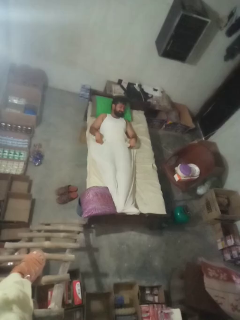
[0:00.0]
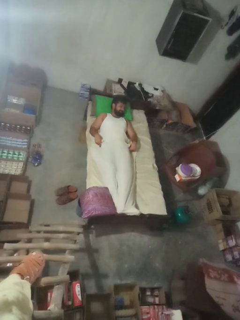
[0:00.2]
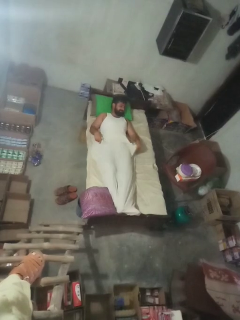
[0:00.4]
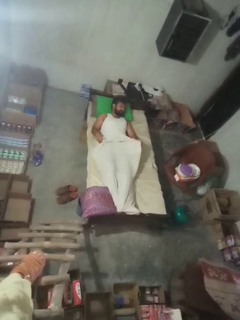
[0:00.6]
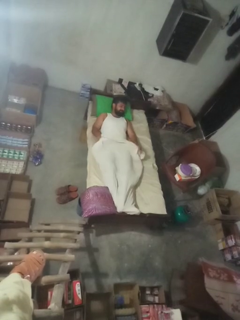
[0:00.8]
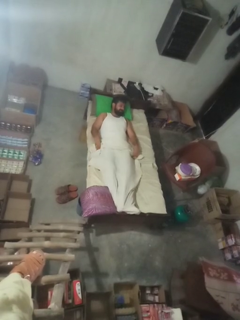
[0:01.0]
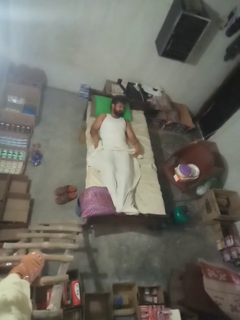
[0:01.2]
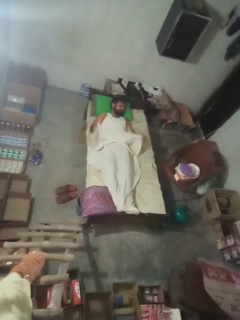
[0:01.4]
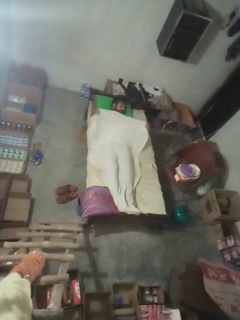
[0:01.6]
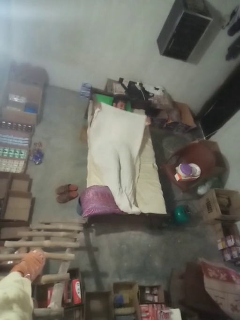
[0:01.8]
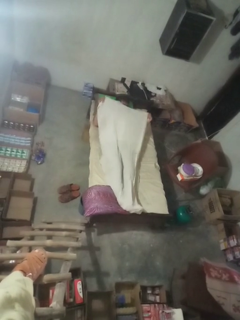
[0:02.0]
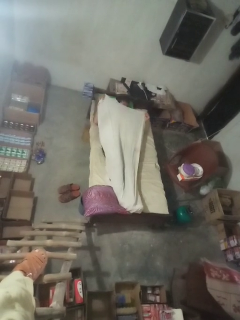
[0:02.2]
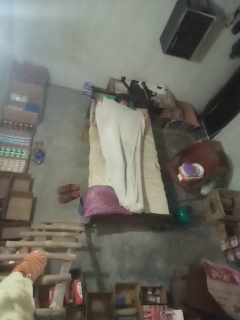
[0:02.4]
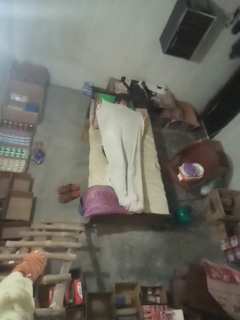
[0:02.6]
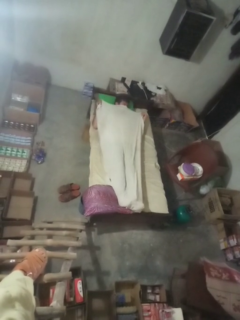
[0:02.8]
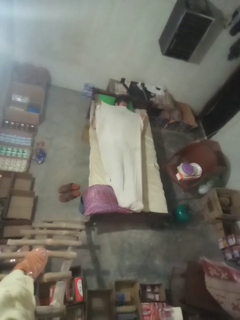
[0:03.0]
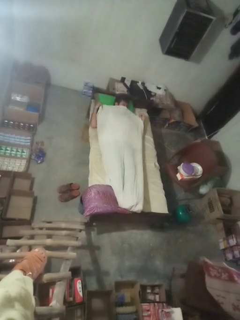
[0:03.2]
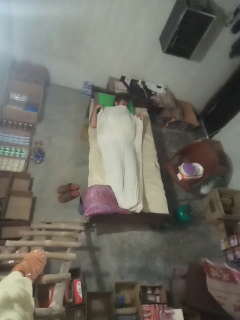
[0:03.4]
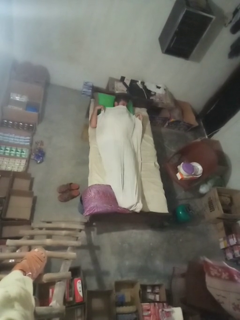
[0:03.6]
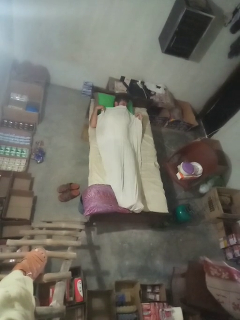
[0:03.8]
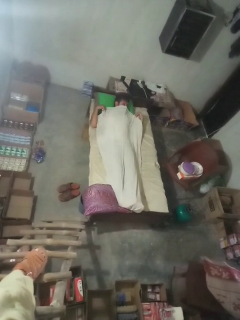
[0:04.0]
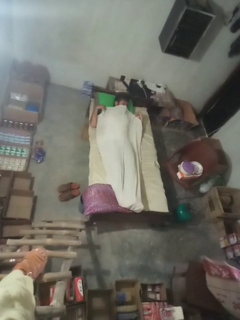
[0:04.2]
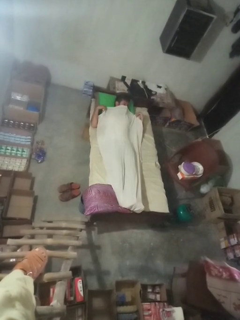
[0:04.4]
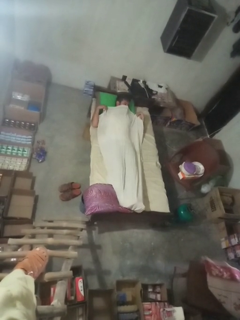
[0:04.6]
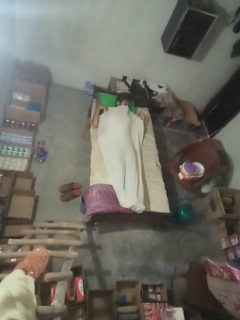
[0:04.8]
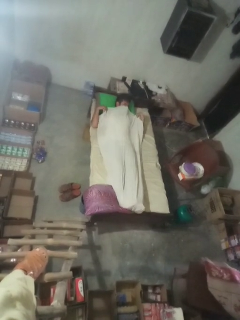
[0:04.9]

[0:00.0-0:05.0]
person covers with bedsheets

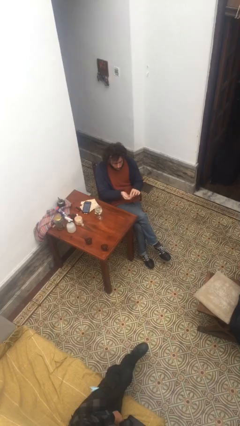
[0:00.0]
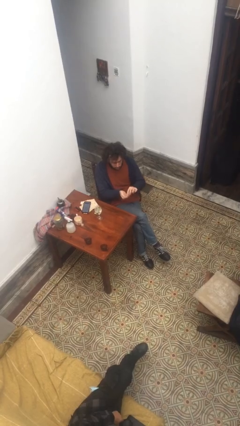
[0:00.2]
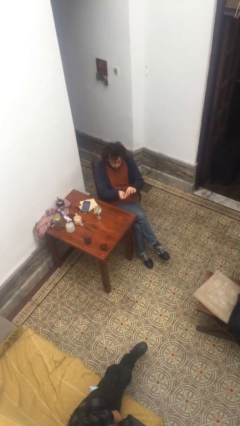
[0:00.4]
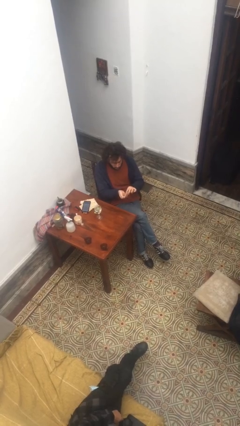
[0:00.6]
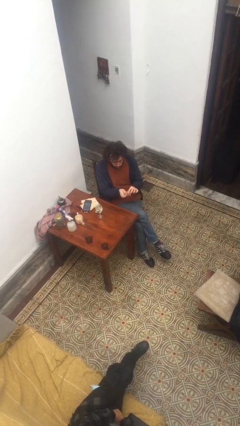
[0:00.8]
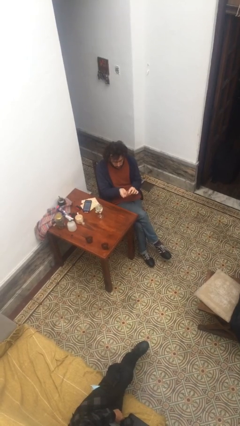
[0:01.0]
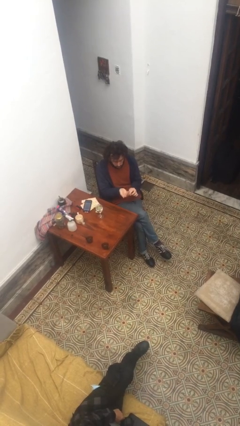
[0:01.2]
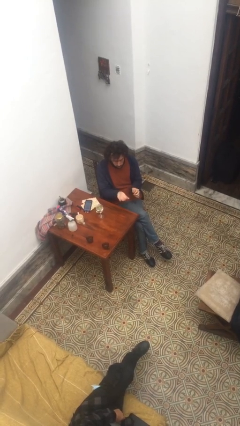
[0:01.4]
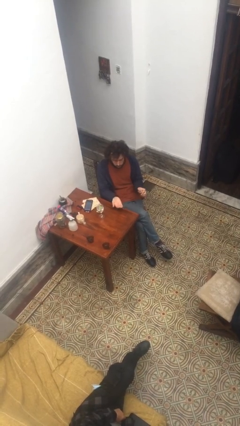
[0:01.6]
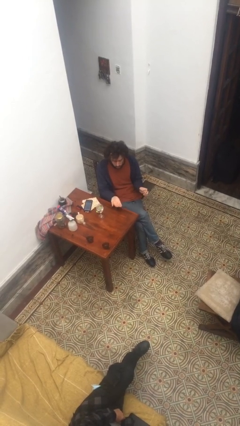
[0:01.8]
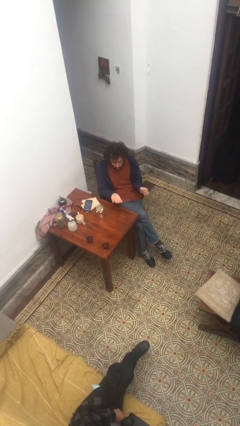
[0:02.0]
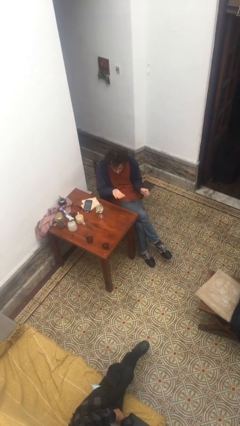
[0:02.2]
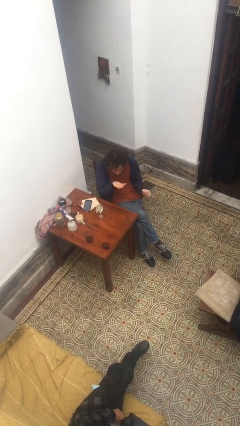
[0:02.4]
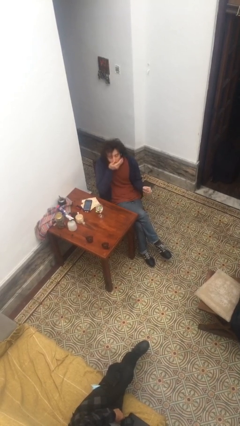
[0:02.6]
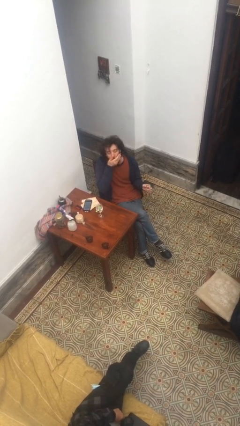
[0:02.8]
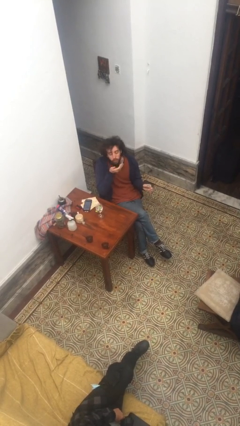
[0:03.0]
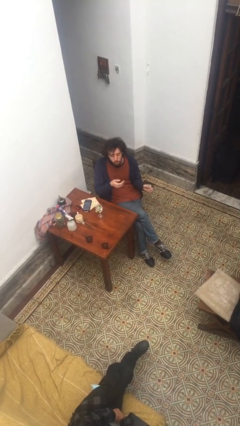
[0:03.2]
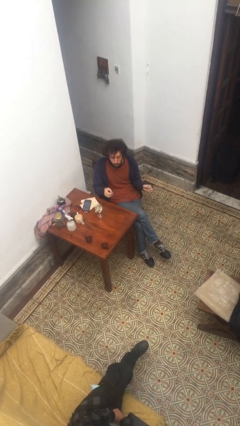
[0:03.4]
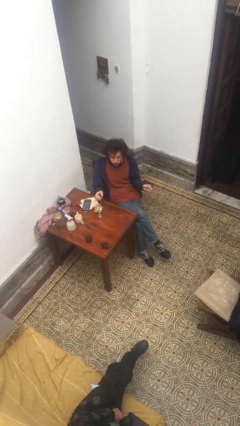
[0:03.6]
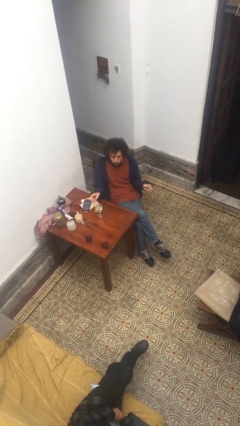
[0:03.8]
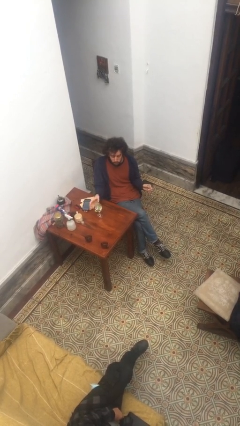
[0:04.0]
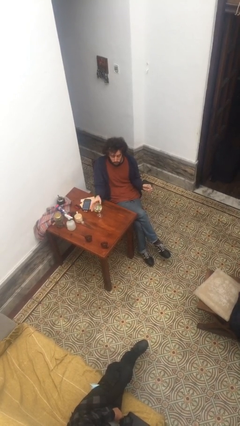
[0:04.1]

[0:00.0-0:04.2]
person takes medicine pills

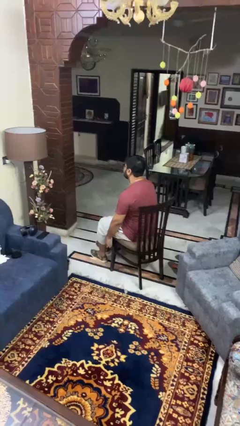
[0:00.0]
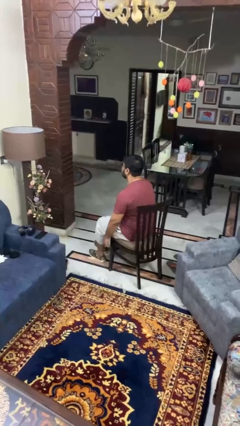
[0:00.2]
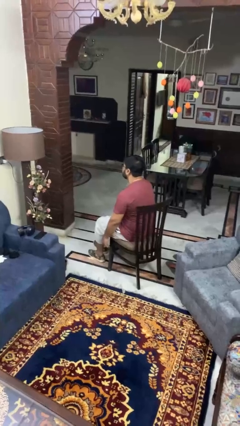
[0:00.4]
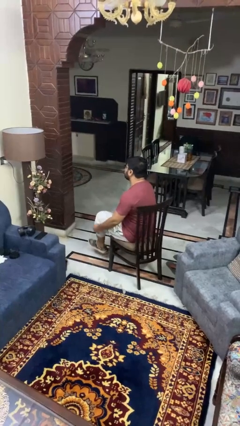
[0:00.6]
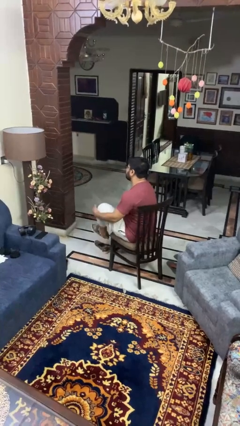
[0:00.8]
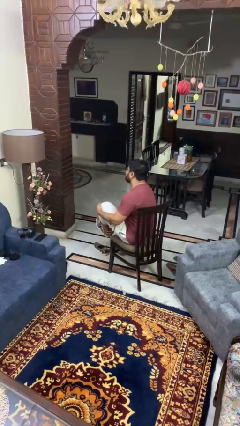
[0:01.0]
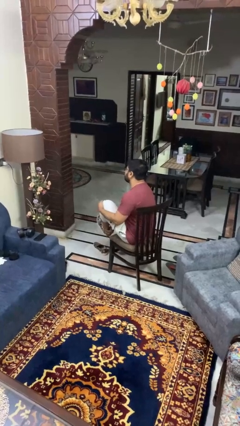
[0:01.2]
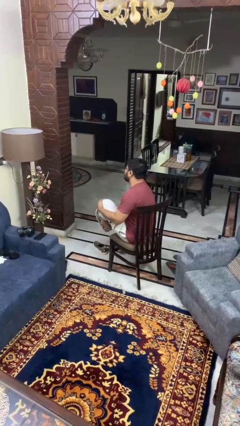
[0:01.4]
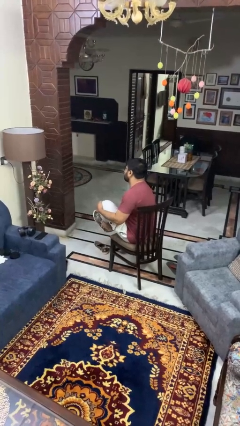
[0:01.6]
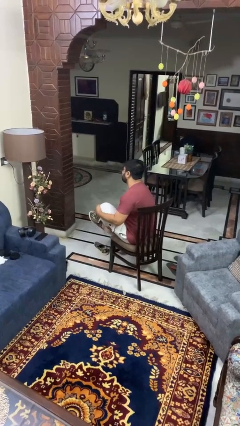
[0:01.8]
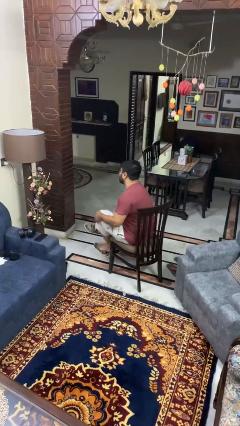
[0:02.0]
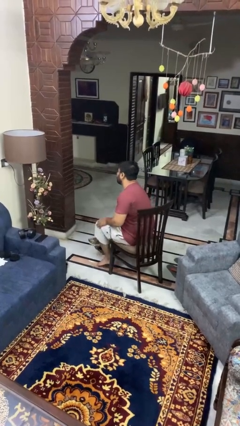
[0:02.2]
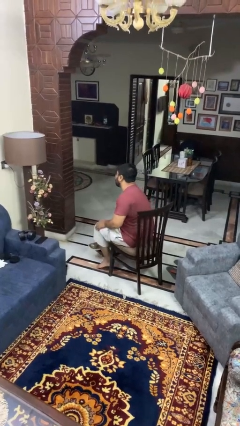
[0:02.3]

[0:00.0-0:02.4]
person takes off shoes

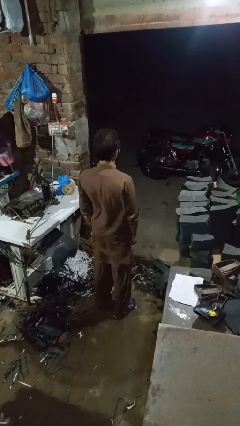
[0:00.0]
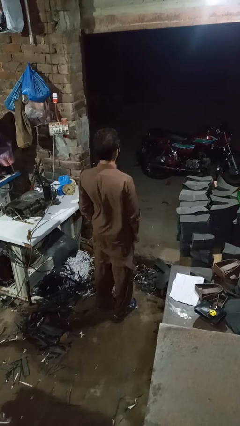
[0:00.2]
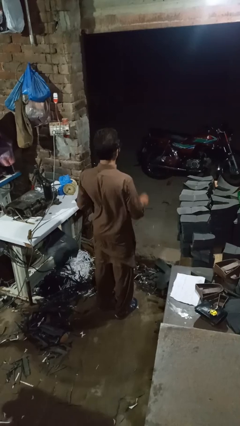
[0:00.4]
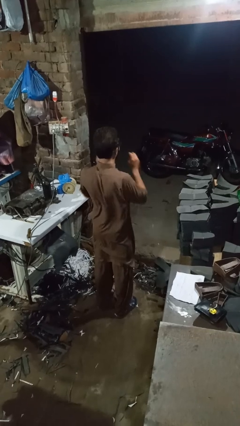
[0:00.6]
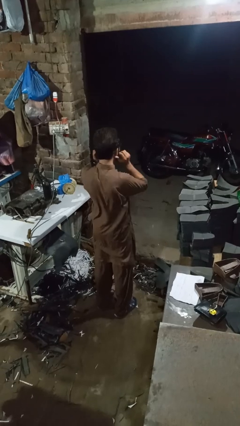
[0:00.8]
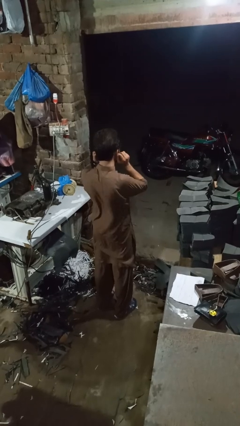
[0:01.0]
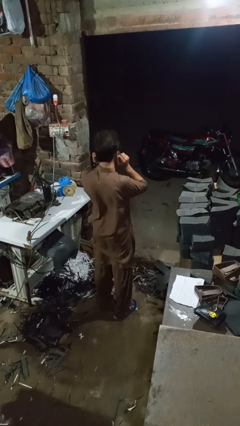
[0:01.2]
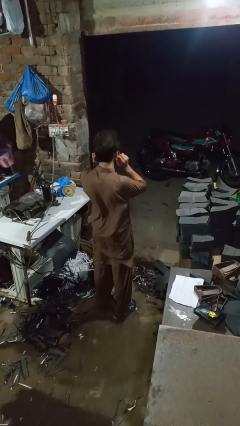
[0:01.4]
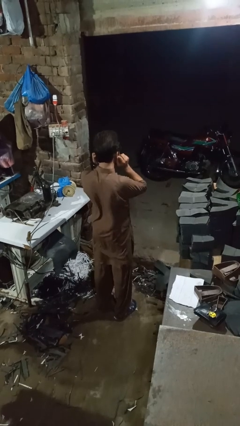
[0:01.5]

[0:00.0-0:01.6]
person touches earlobe

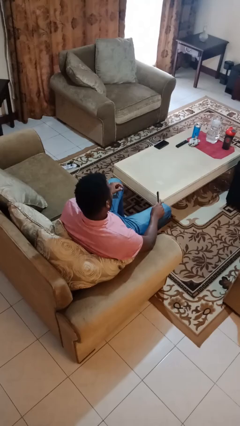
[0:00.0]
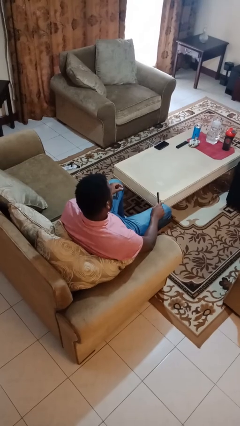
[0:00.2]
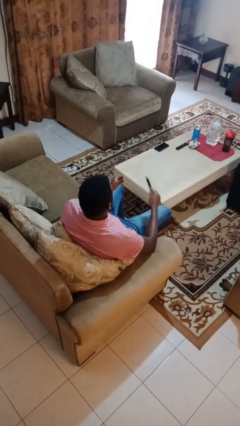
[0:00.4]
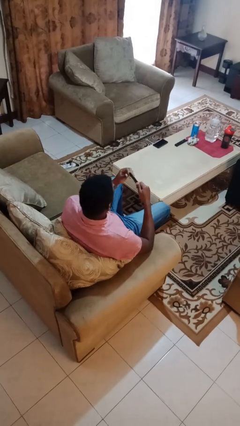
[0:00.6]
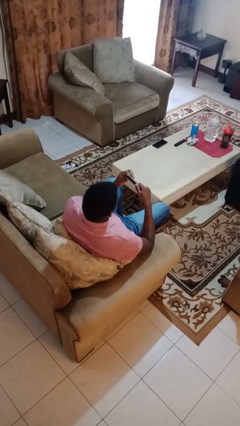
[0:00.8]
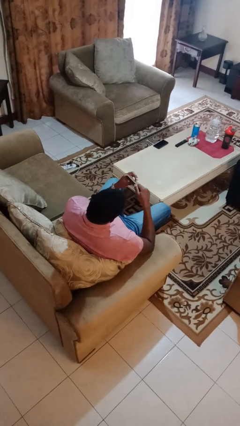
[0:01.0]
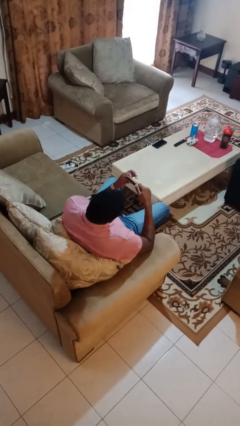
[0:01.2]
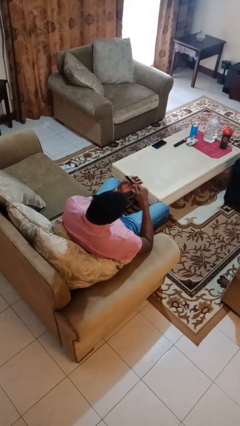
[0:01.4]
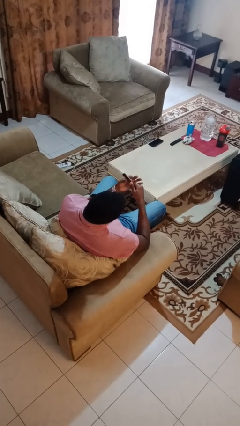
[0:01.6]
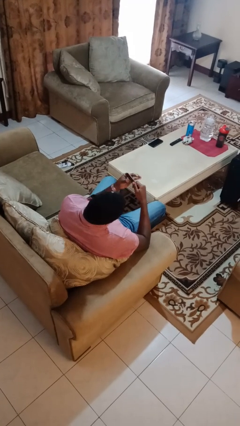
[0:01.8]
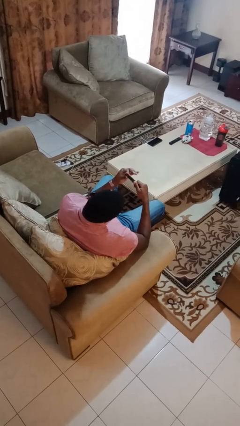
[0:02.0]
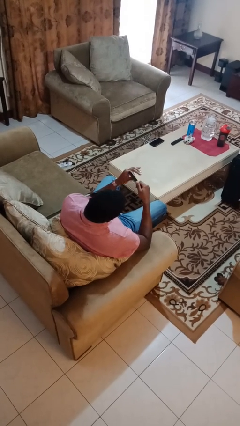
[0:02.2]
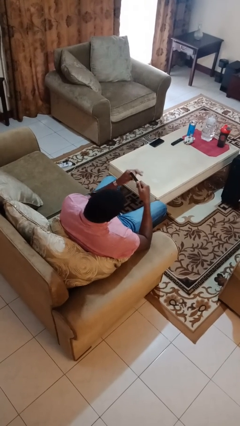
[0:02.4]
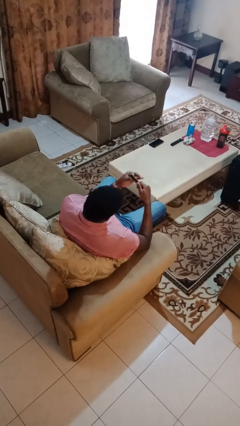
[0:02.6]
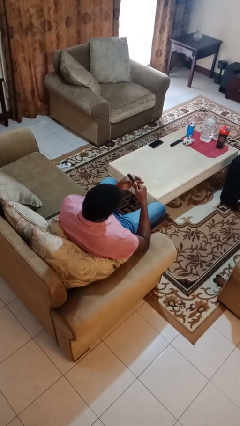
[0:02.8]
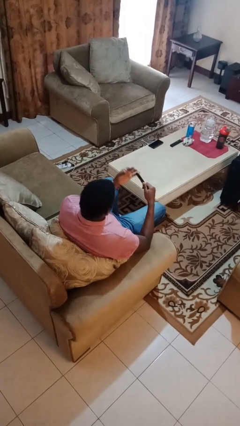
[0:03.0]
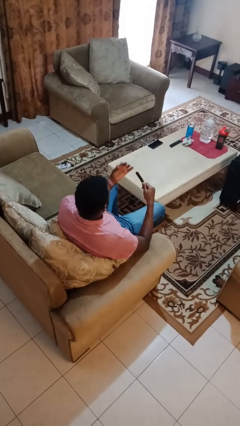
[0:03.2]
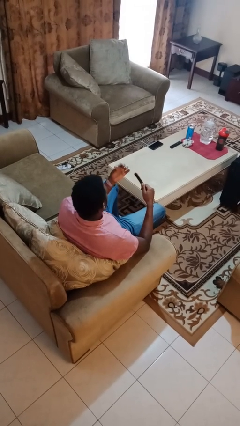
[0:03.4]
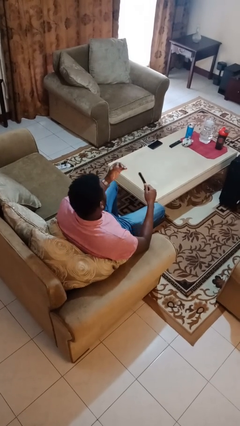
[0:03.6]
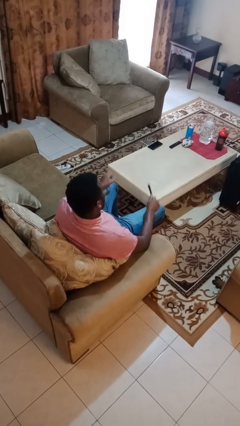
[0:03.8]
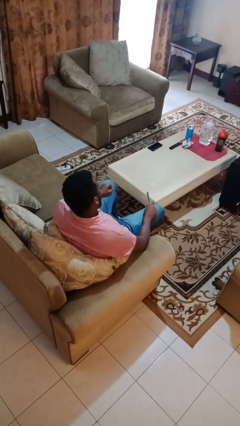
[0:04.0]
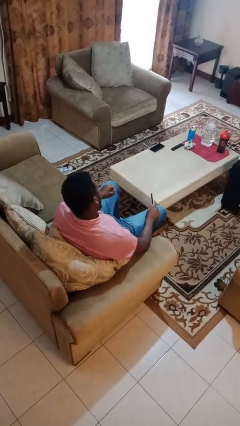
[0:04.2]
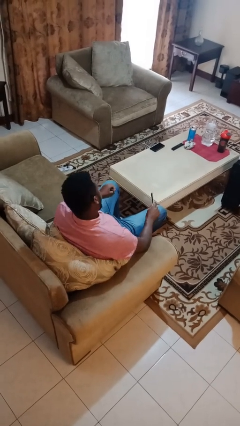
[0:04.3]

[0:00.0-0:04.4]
person files fingernails

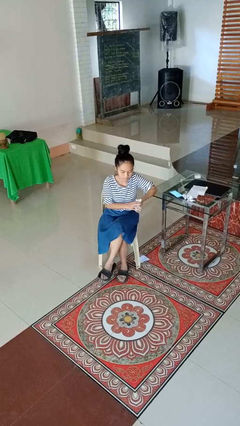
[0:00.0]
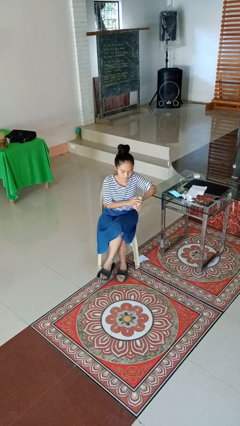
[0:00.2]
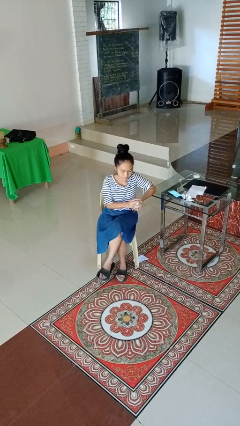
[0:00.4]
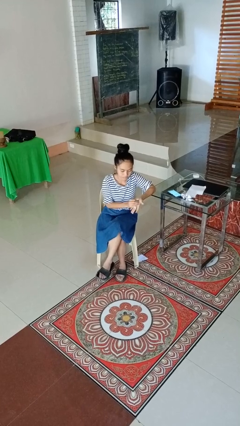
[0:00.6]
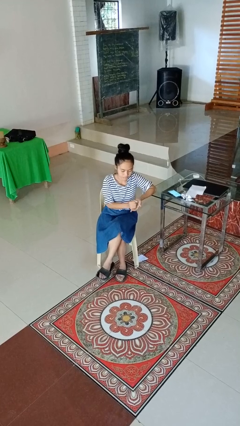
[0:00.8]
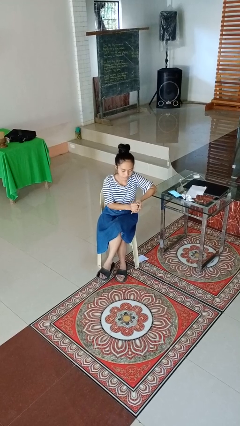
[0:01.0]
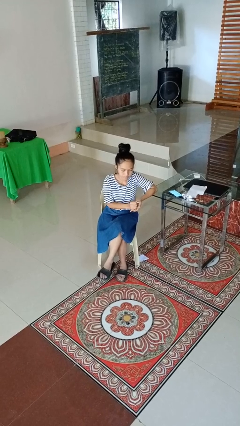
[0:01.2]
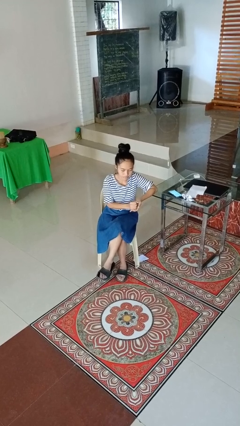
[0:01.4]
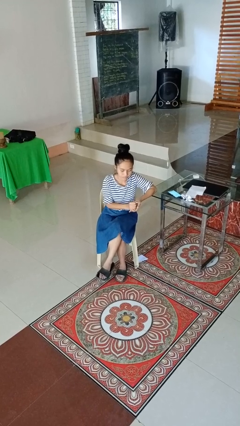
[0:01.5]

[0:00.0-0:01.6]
person crumples paper
